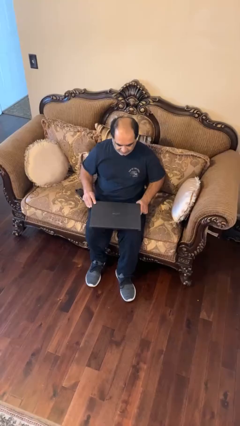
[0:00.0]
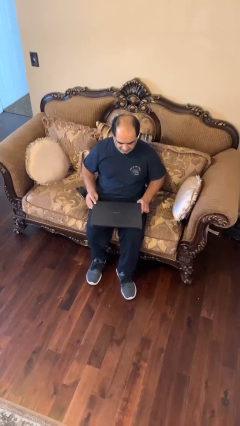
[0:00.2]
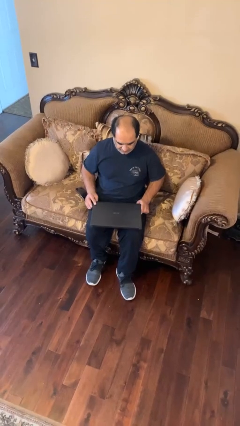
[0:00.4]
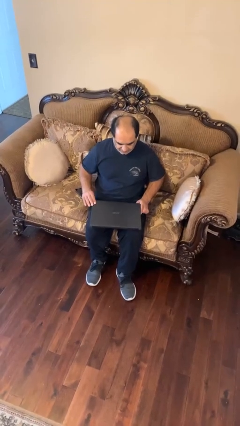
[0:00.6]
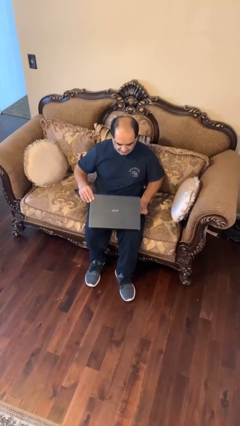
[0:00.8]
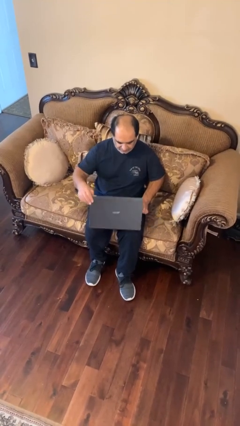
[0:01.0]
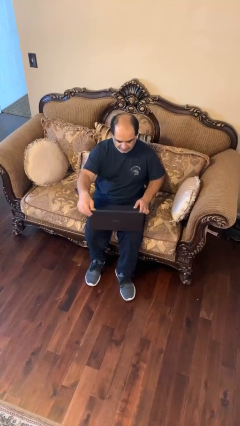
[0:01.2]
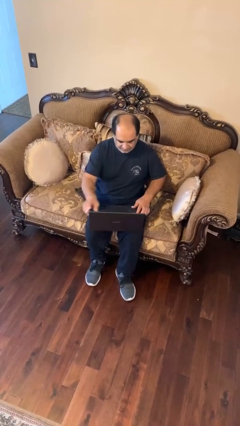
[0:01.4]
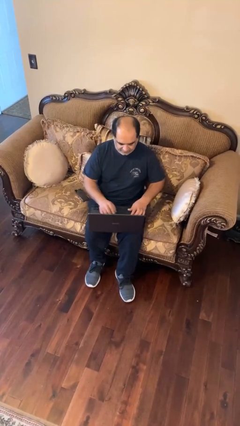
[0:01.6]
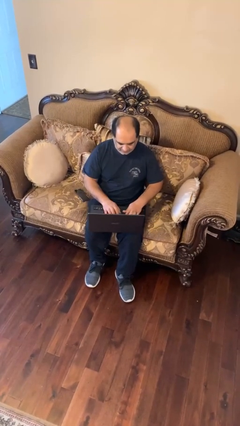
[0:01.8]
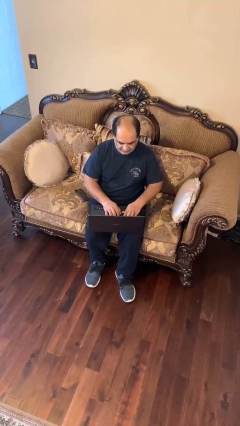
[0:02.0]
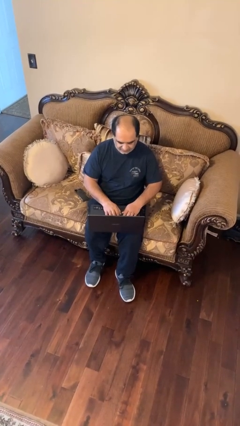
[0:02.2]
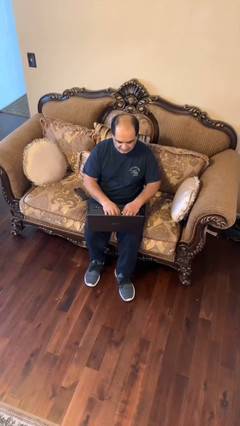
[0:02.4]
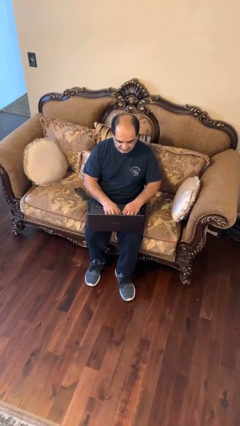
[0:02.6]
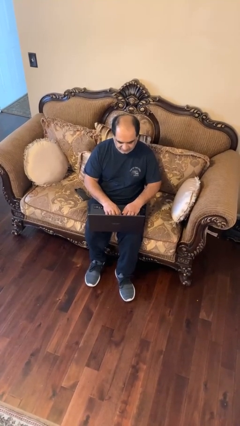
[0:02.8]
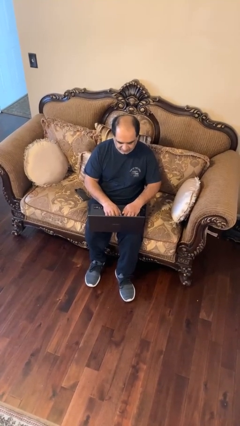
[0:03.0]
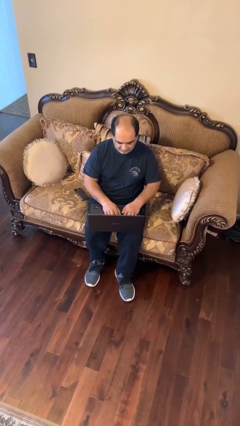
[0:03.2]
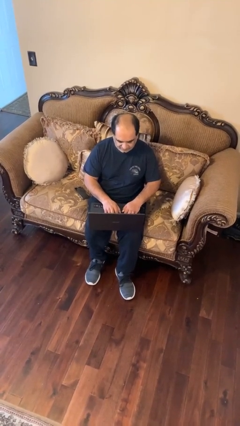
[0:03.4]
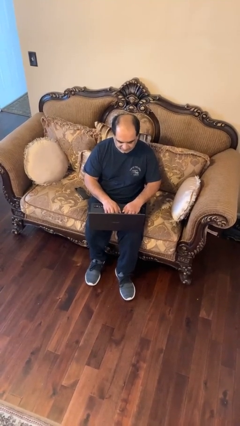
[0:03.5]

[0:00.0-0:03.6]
person interacts with laptop

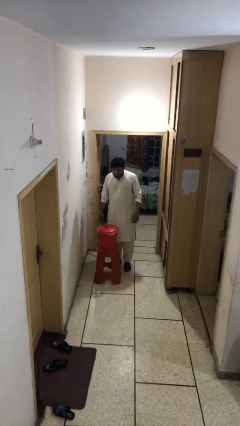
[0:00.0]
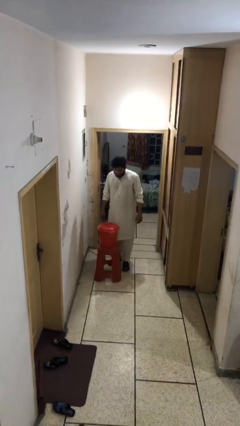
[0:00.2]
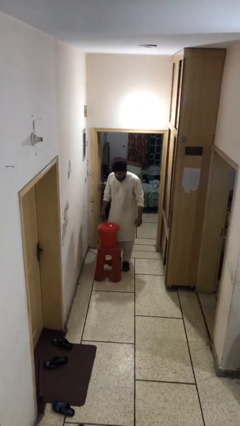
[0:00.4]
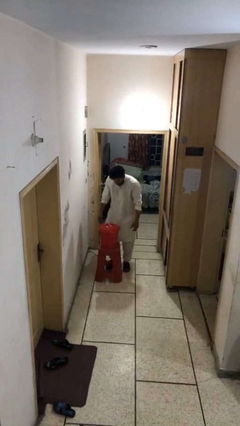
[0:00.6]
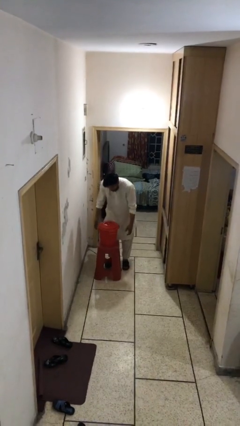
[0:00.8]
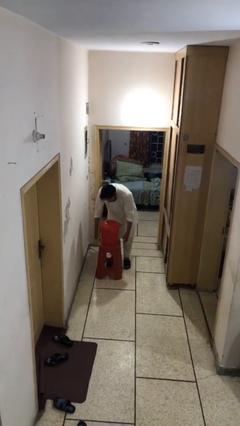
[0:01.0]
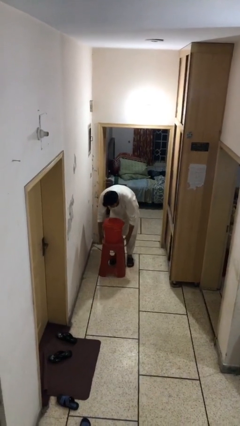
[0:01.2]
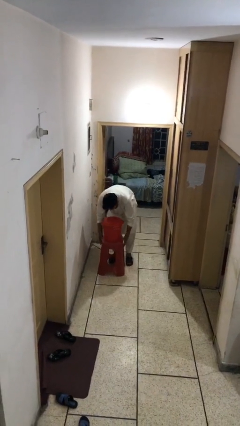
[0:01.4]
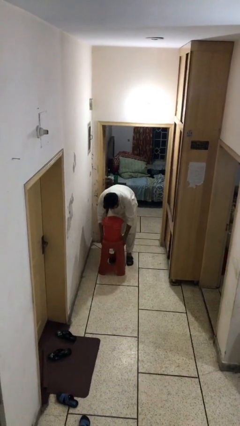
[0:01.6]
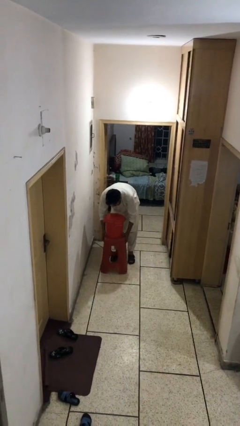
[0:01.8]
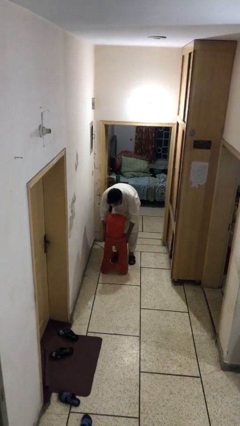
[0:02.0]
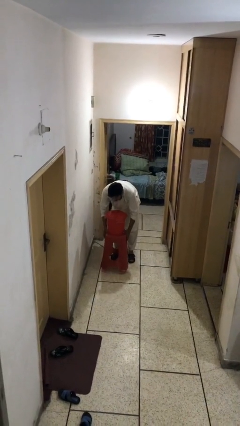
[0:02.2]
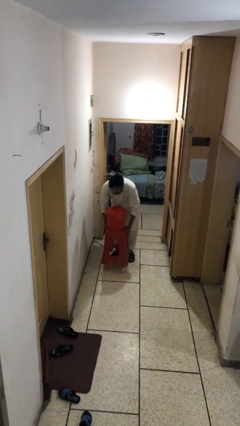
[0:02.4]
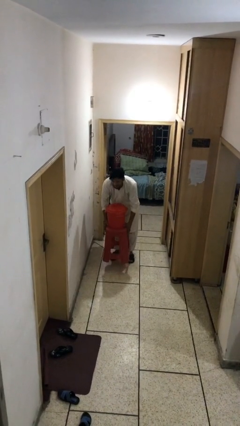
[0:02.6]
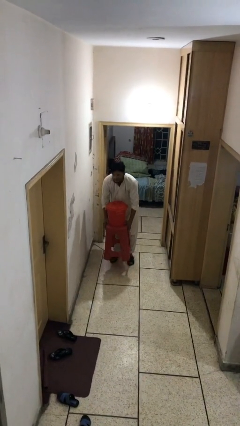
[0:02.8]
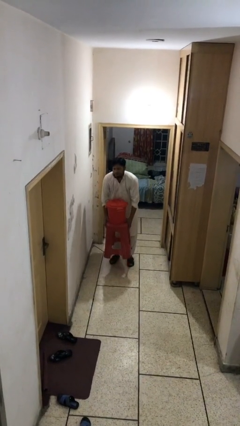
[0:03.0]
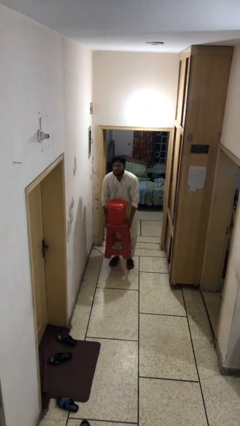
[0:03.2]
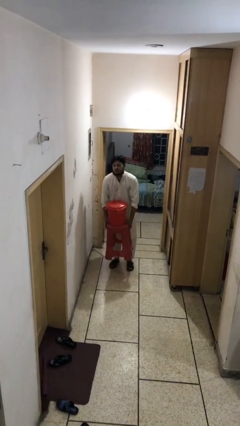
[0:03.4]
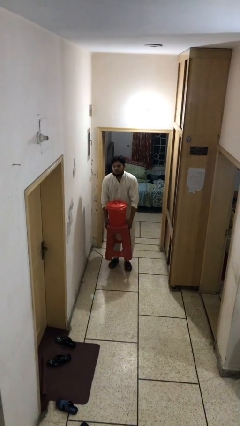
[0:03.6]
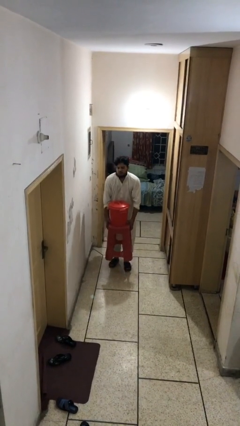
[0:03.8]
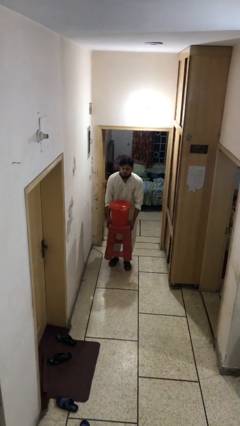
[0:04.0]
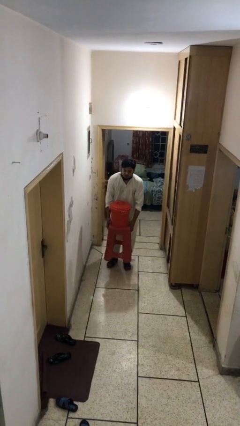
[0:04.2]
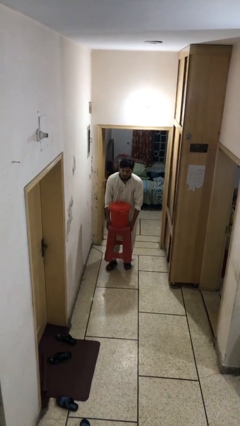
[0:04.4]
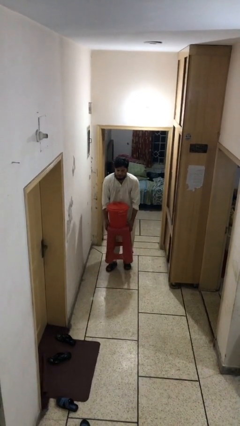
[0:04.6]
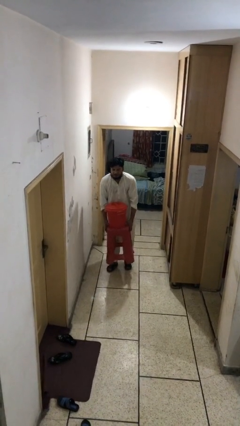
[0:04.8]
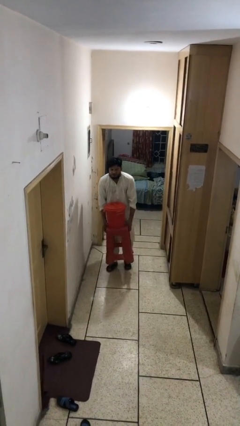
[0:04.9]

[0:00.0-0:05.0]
person picks up object from floor

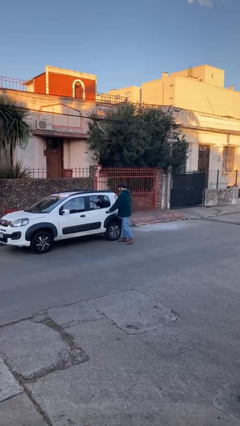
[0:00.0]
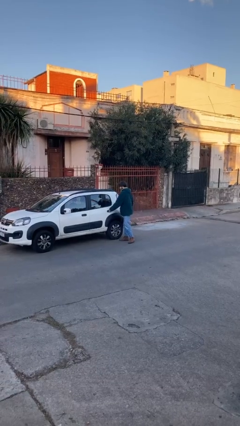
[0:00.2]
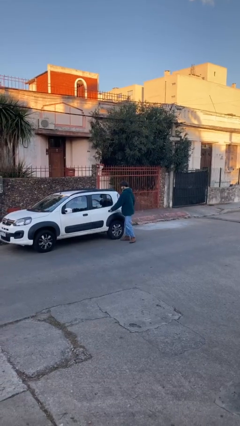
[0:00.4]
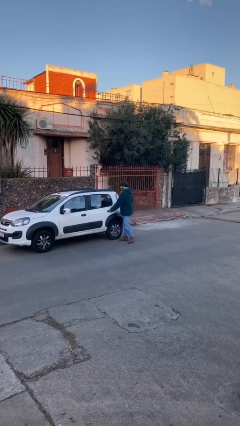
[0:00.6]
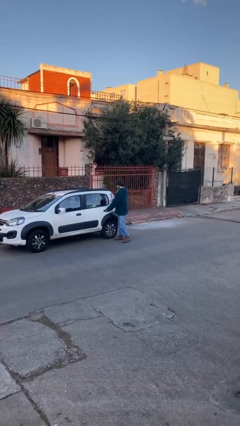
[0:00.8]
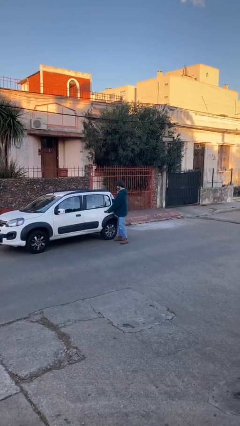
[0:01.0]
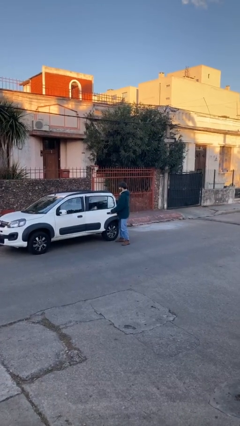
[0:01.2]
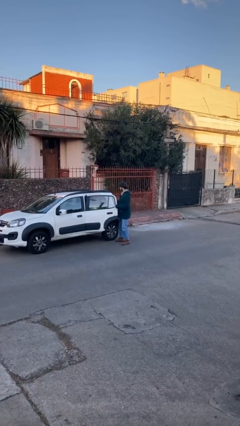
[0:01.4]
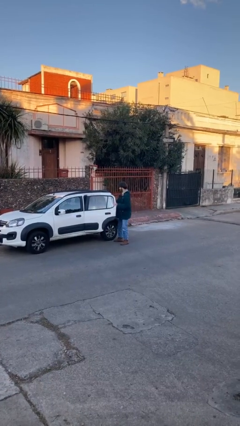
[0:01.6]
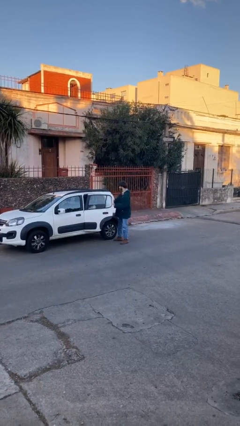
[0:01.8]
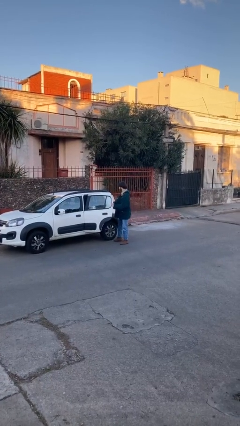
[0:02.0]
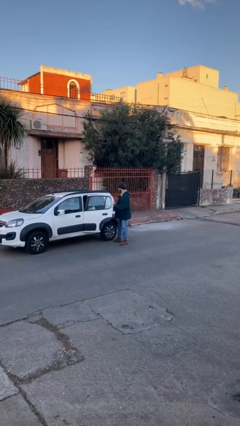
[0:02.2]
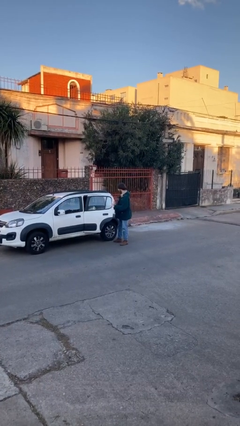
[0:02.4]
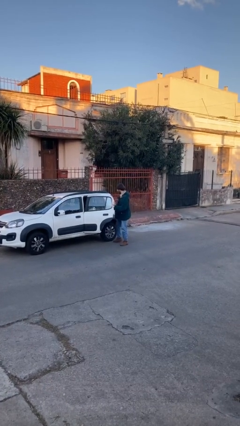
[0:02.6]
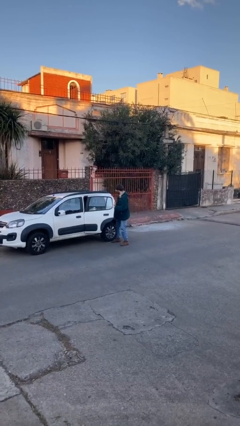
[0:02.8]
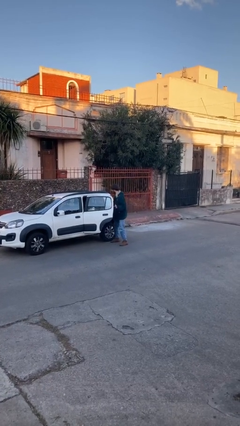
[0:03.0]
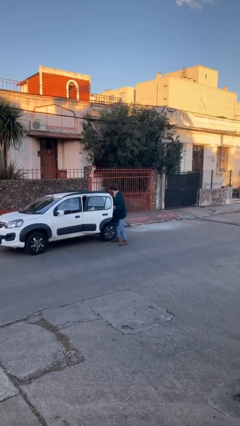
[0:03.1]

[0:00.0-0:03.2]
person opens car door

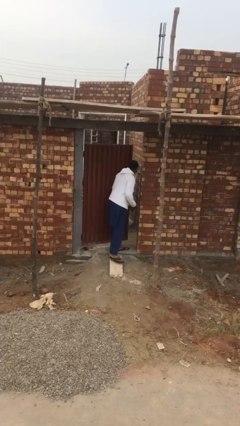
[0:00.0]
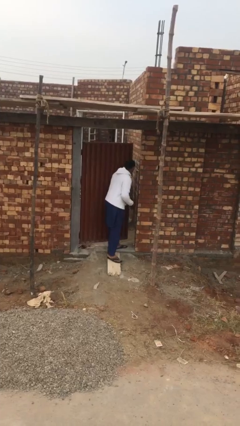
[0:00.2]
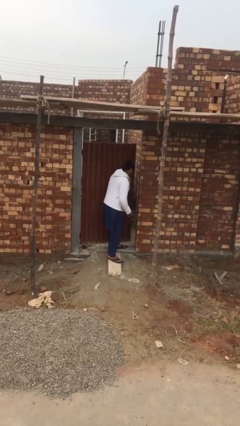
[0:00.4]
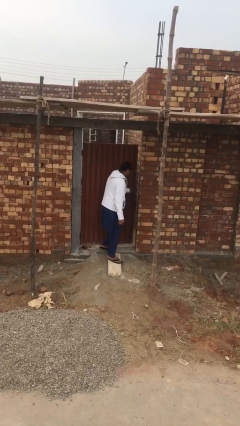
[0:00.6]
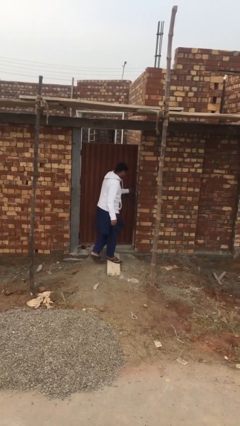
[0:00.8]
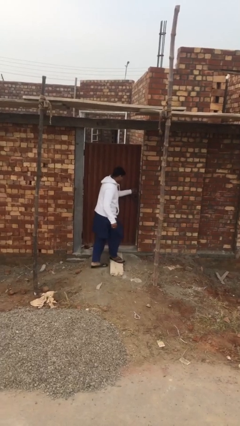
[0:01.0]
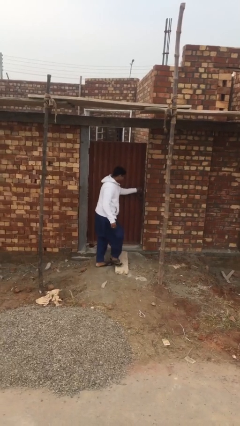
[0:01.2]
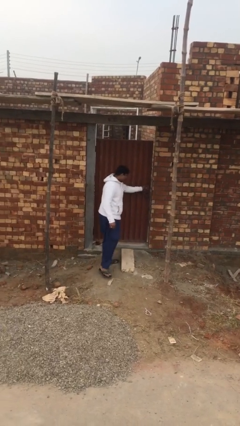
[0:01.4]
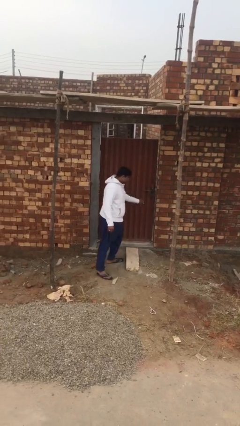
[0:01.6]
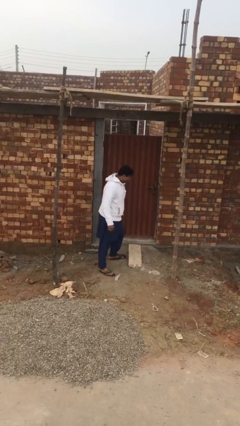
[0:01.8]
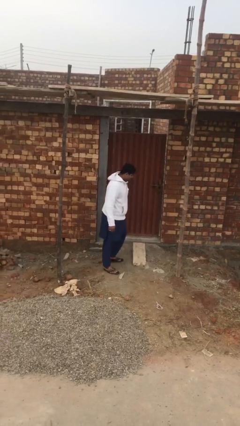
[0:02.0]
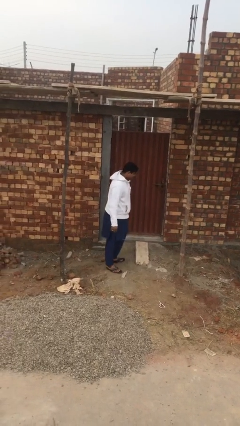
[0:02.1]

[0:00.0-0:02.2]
person closes facility door

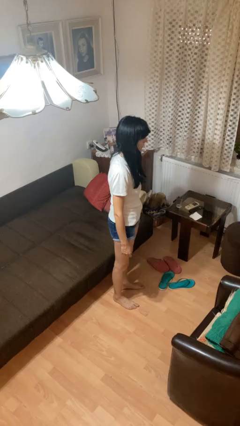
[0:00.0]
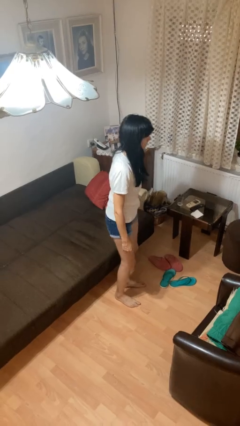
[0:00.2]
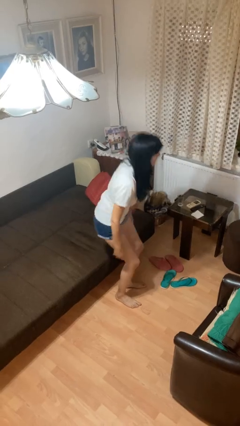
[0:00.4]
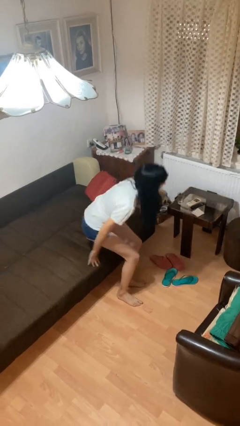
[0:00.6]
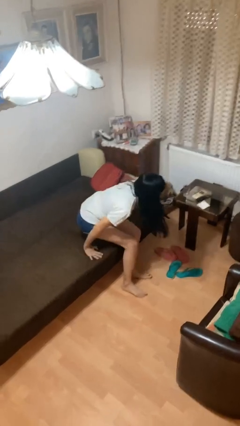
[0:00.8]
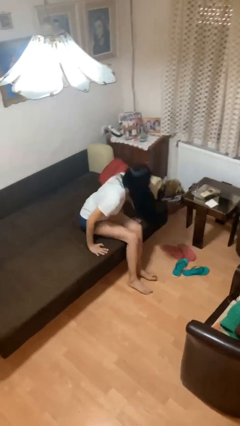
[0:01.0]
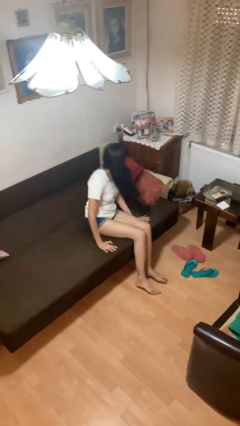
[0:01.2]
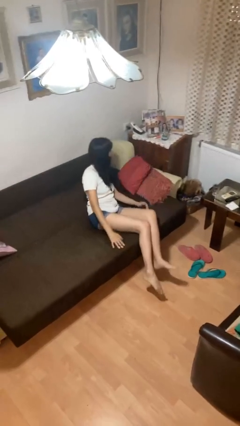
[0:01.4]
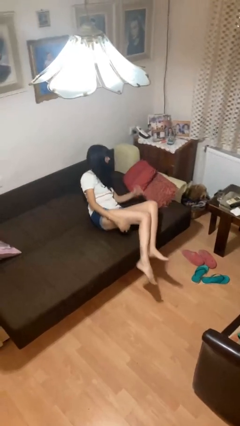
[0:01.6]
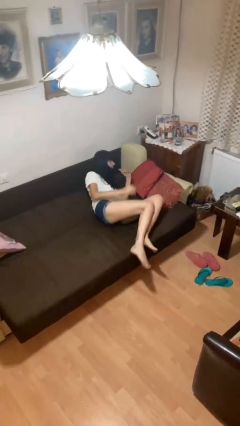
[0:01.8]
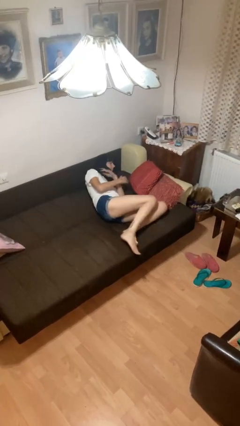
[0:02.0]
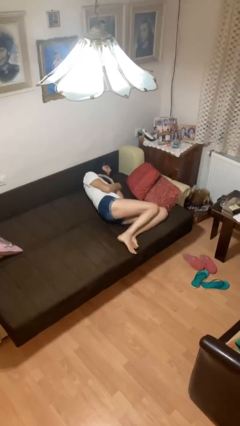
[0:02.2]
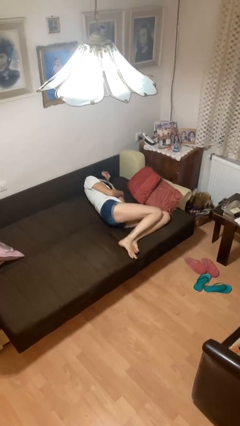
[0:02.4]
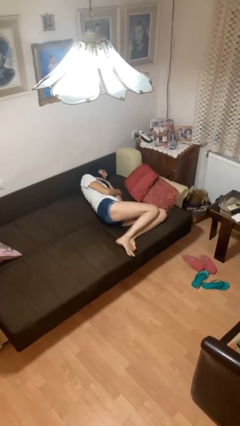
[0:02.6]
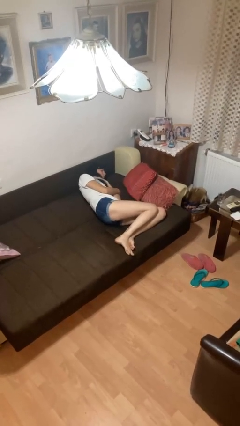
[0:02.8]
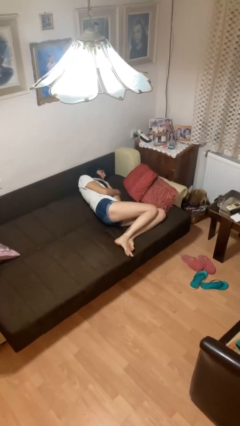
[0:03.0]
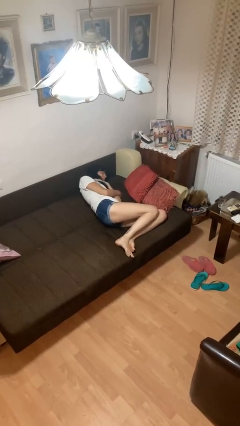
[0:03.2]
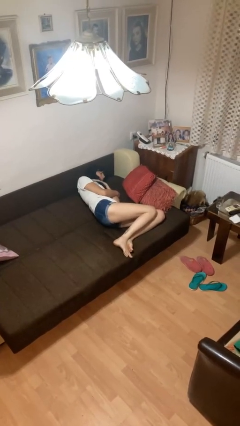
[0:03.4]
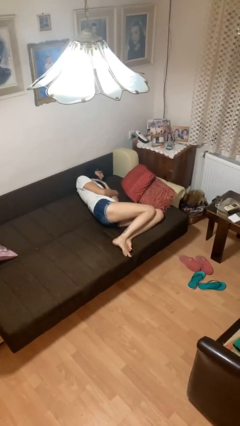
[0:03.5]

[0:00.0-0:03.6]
person lies down on bed

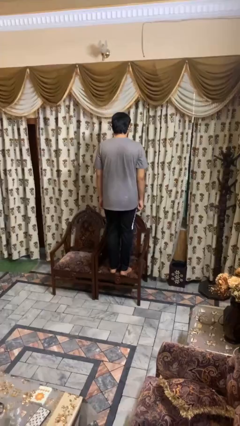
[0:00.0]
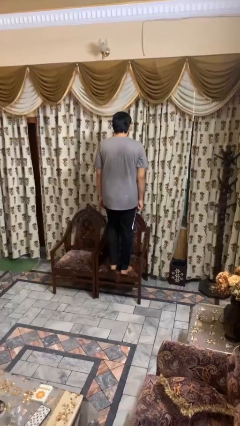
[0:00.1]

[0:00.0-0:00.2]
person climbs off chair
